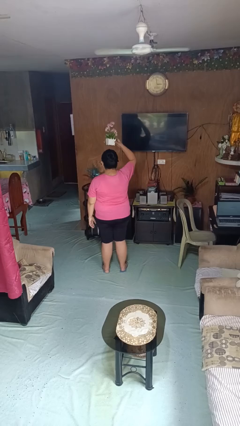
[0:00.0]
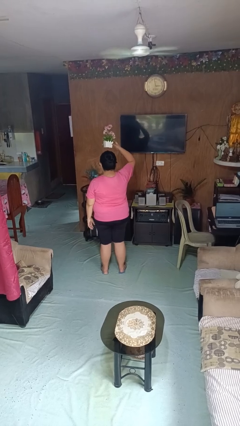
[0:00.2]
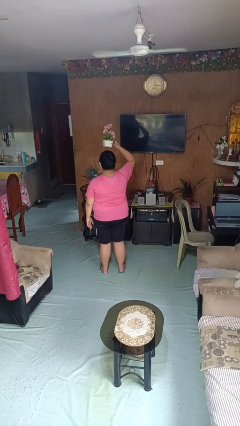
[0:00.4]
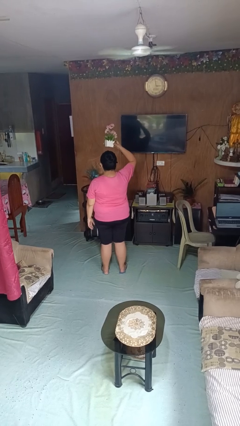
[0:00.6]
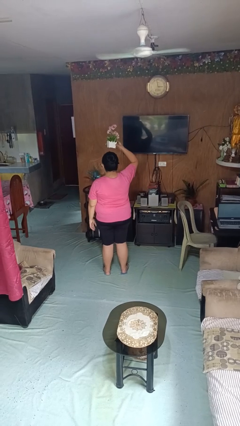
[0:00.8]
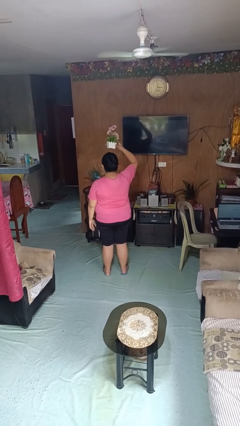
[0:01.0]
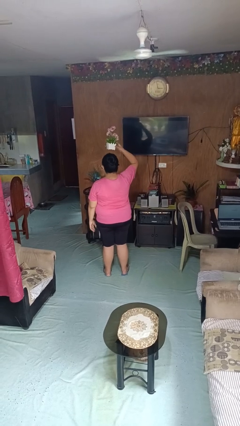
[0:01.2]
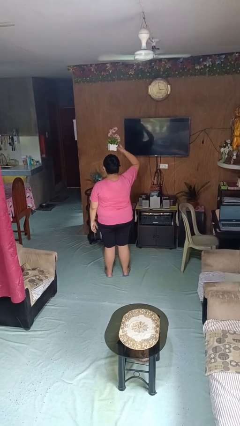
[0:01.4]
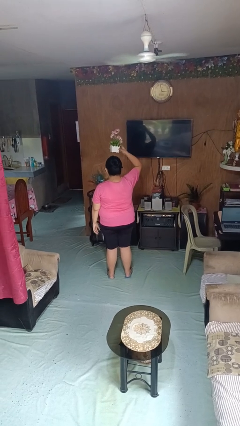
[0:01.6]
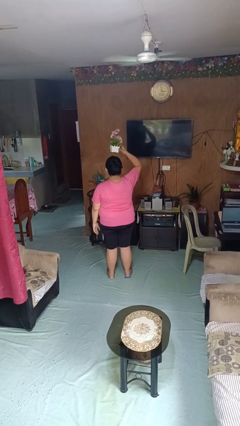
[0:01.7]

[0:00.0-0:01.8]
person holds object above head

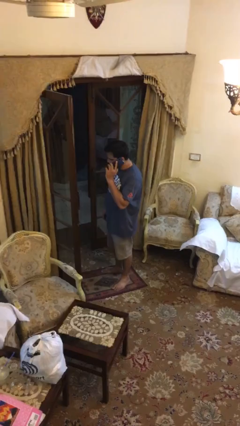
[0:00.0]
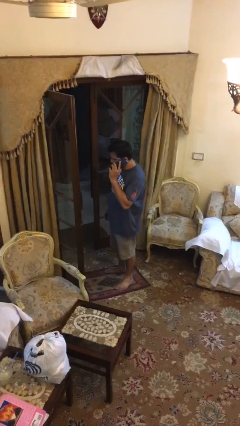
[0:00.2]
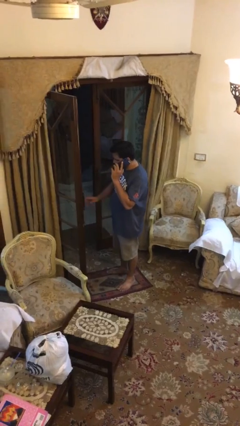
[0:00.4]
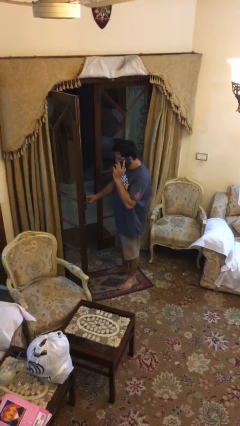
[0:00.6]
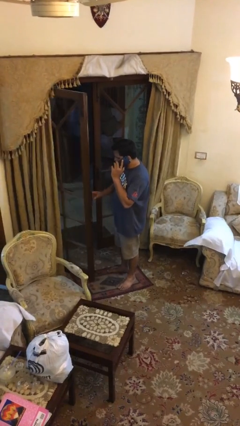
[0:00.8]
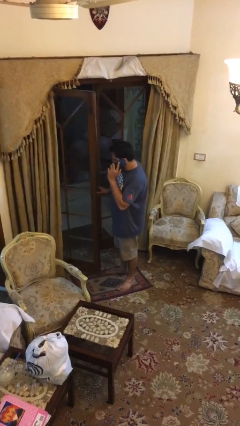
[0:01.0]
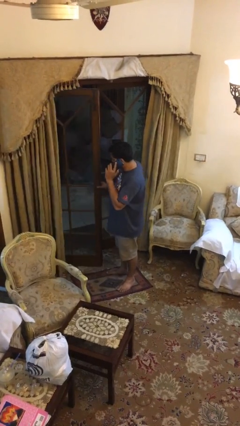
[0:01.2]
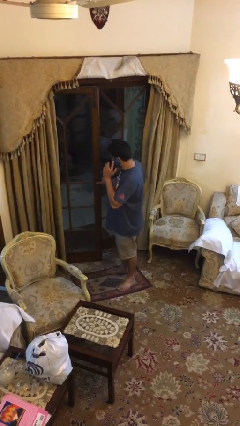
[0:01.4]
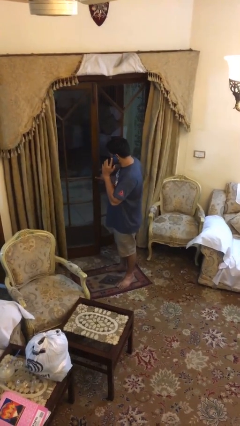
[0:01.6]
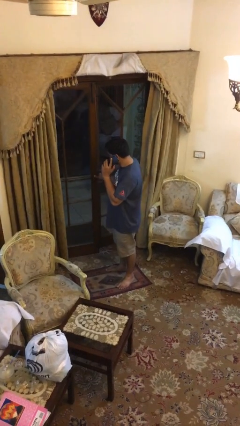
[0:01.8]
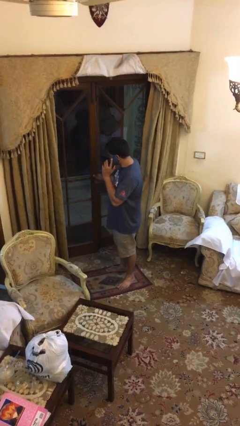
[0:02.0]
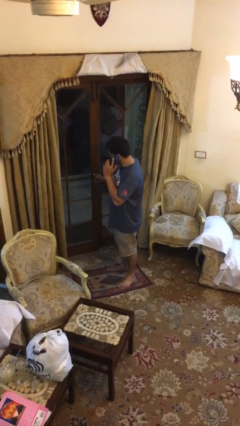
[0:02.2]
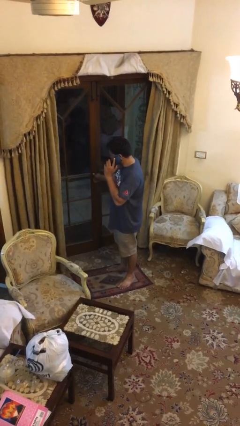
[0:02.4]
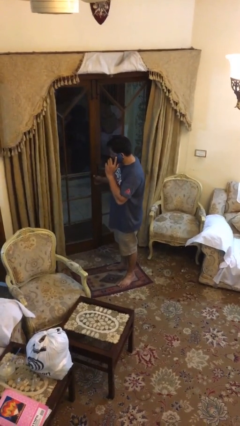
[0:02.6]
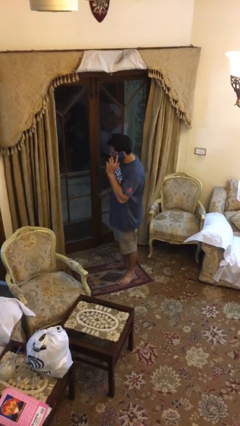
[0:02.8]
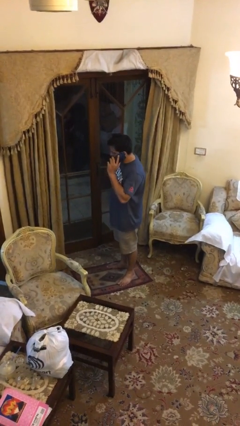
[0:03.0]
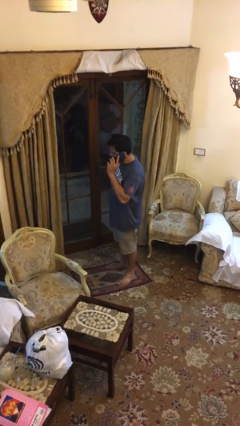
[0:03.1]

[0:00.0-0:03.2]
person closes facility door

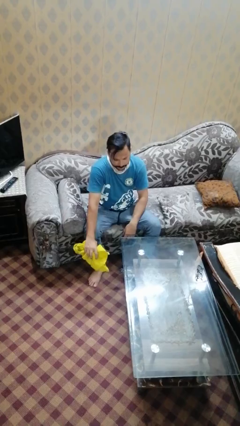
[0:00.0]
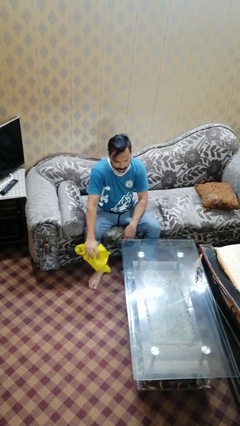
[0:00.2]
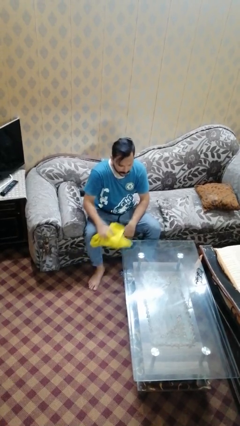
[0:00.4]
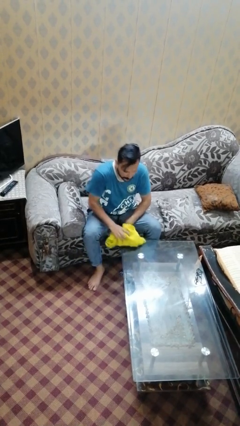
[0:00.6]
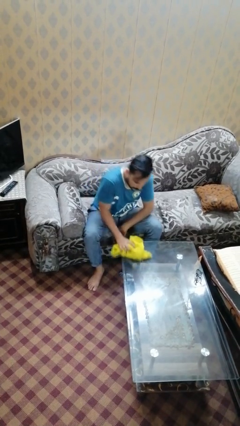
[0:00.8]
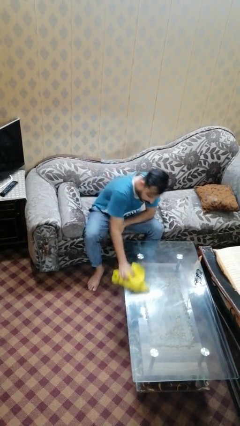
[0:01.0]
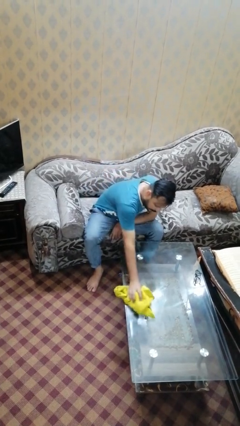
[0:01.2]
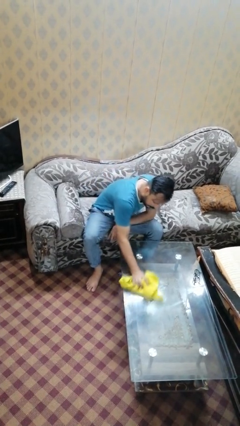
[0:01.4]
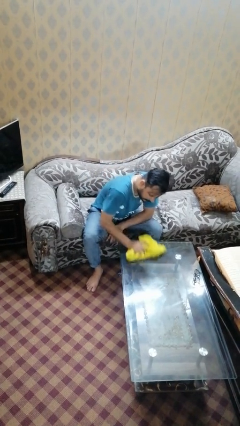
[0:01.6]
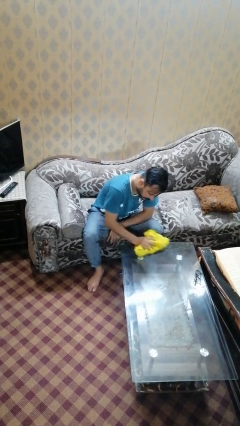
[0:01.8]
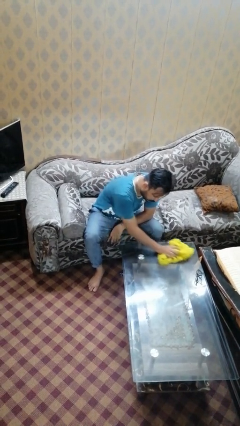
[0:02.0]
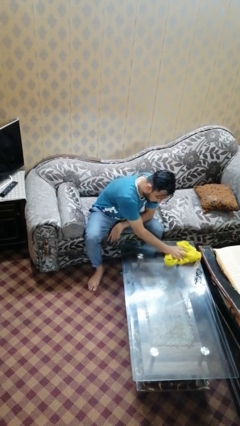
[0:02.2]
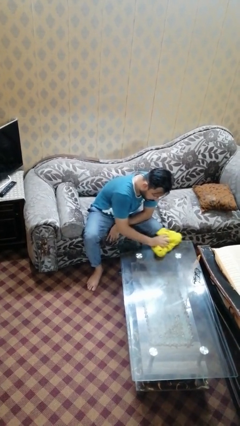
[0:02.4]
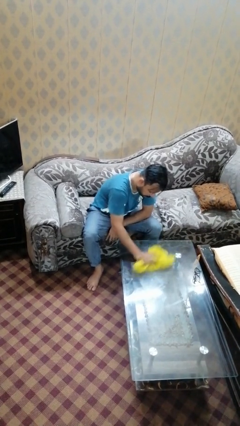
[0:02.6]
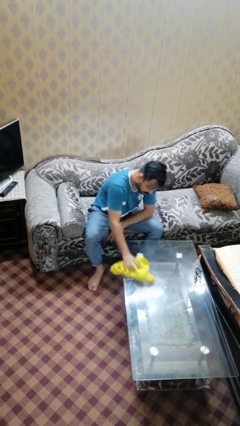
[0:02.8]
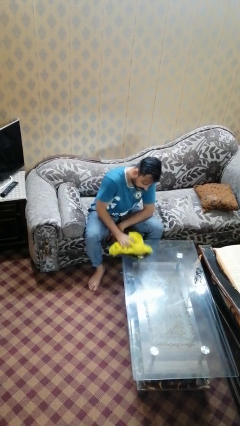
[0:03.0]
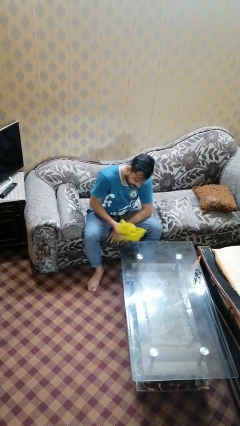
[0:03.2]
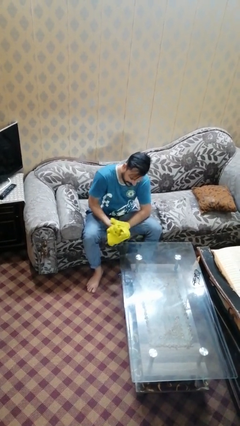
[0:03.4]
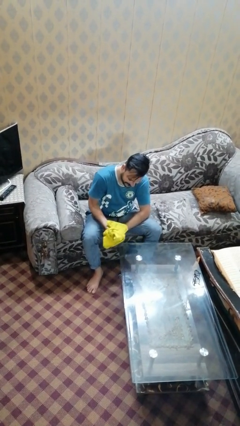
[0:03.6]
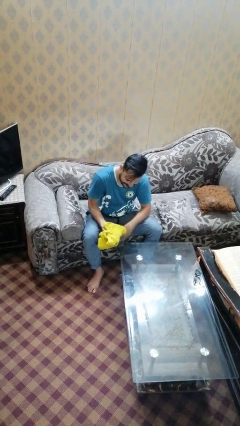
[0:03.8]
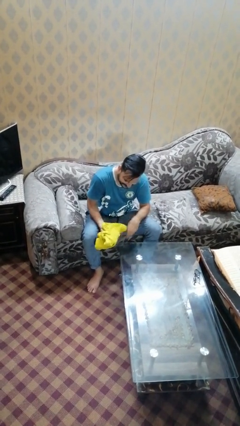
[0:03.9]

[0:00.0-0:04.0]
person cleans table with rag

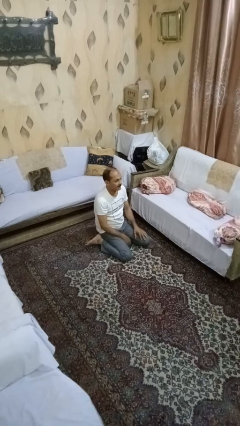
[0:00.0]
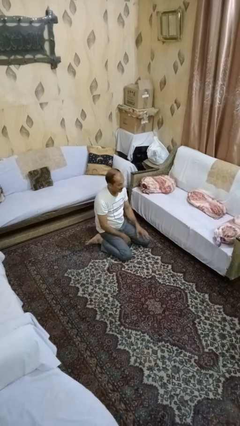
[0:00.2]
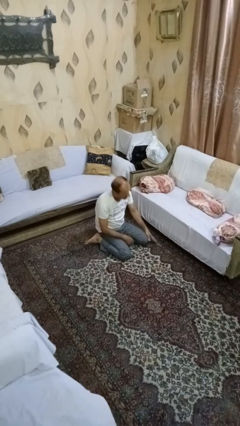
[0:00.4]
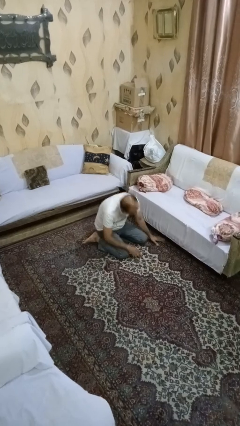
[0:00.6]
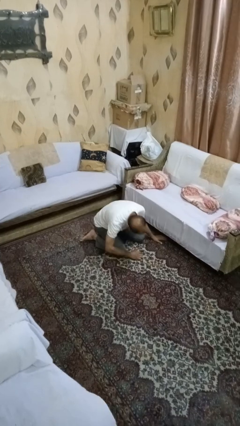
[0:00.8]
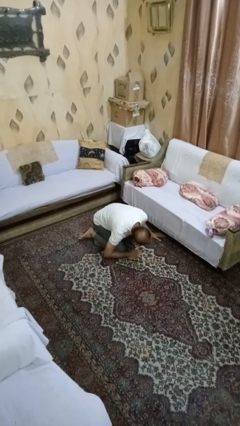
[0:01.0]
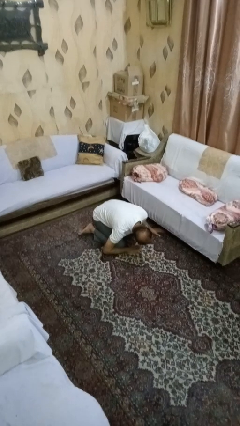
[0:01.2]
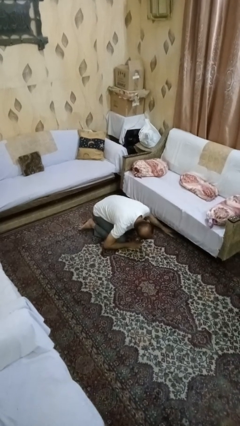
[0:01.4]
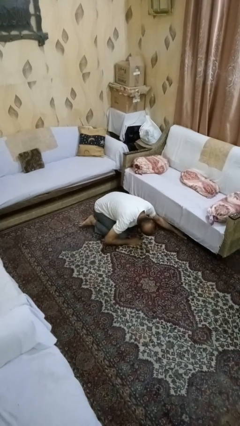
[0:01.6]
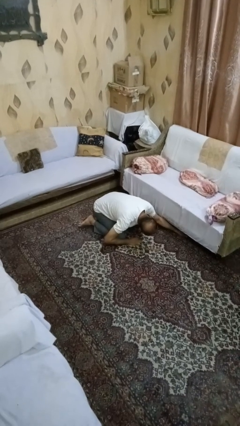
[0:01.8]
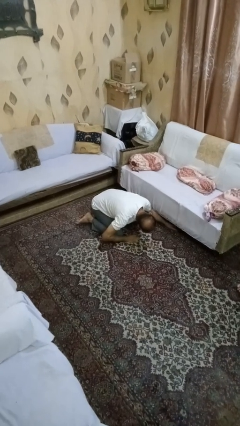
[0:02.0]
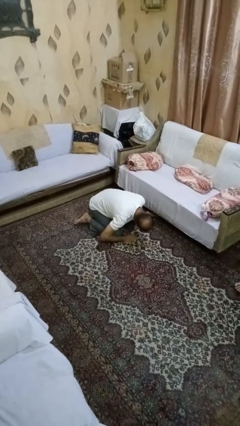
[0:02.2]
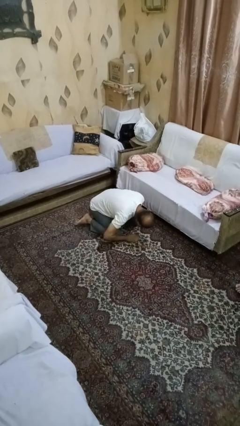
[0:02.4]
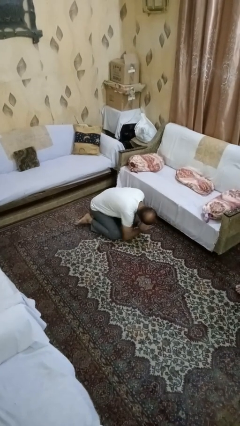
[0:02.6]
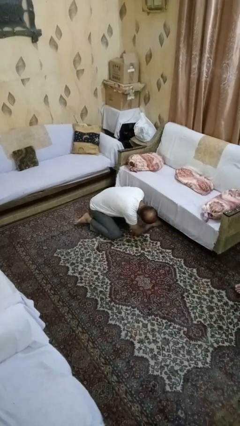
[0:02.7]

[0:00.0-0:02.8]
person searches under couch

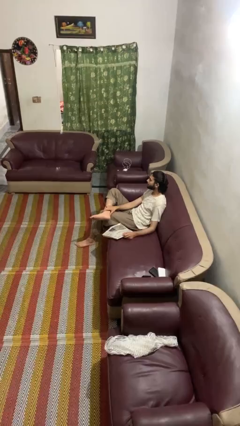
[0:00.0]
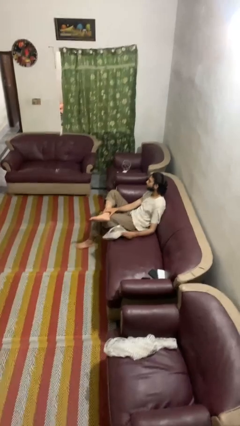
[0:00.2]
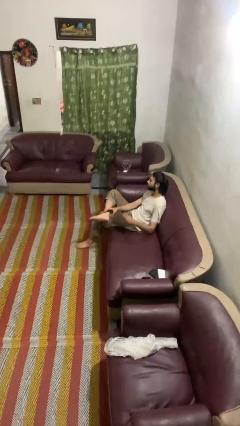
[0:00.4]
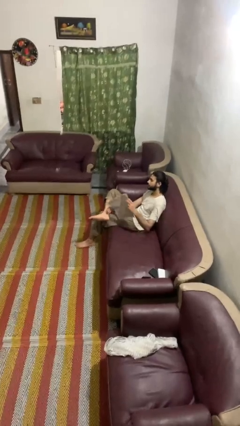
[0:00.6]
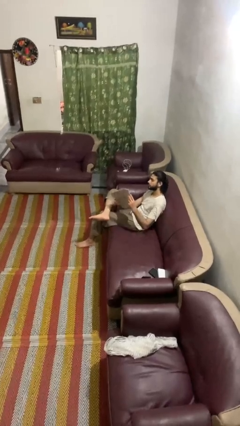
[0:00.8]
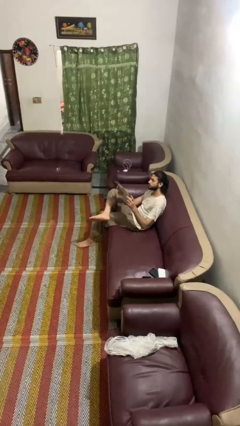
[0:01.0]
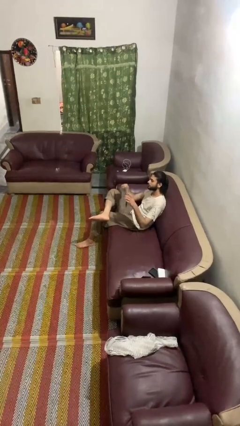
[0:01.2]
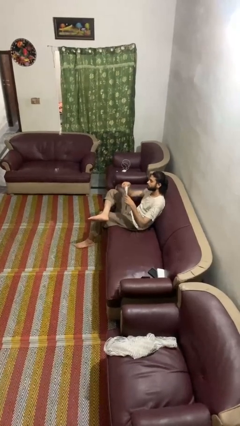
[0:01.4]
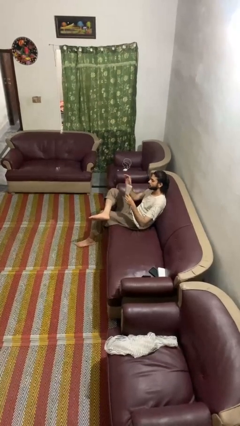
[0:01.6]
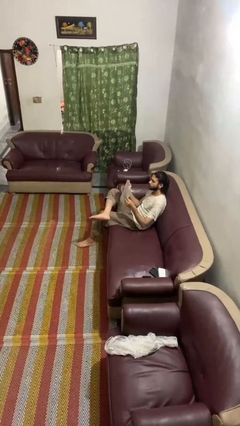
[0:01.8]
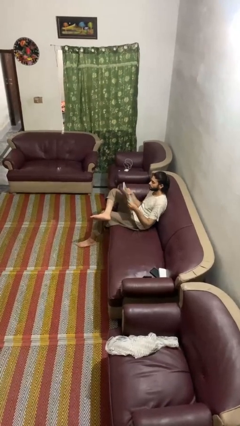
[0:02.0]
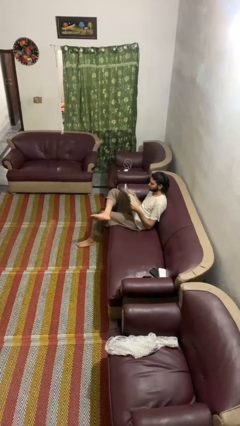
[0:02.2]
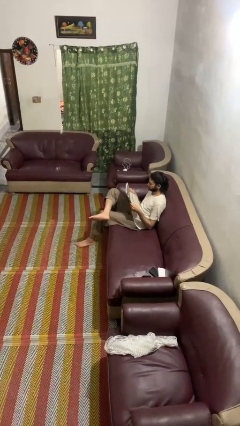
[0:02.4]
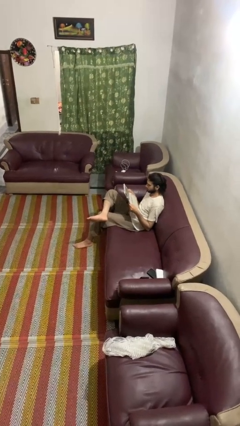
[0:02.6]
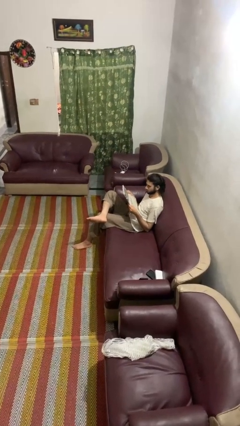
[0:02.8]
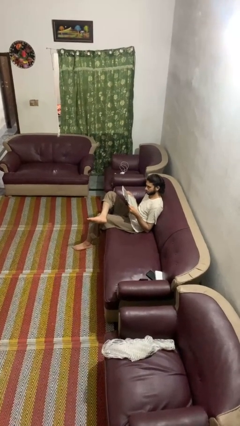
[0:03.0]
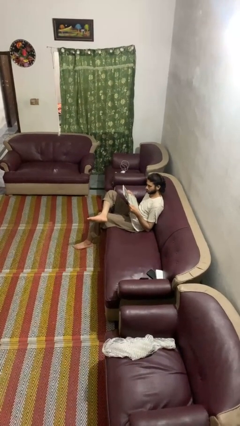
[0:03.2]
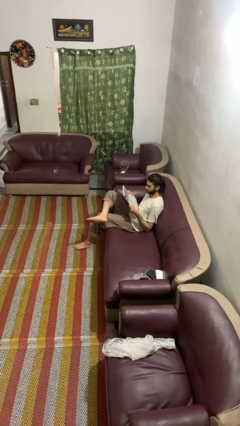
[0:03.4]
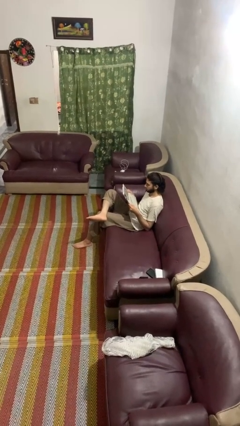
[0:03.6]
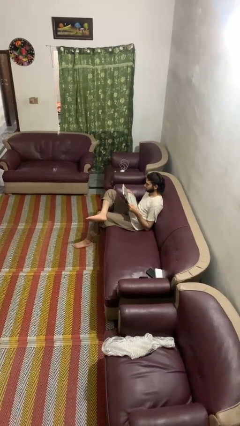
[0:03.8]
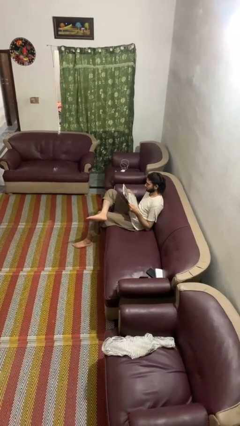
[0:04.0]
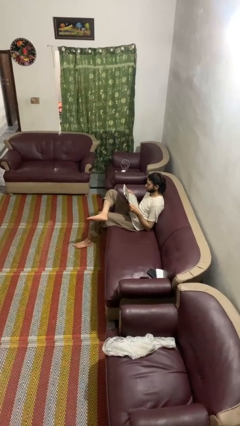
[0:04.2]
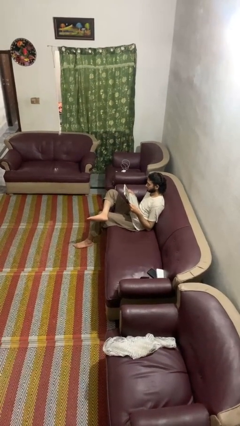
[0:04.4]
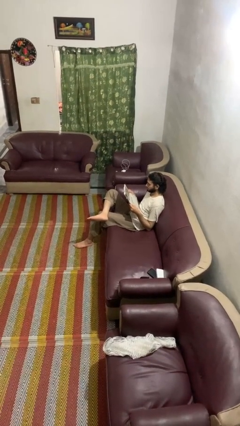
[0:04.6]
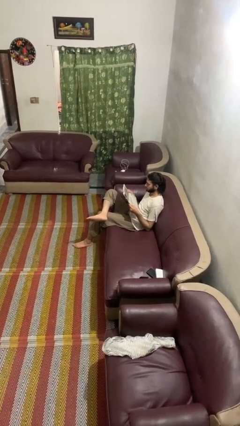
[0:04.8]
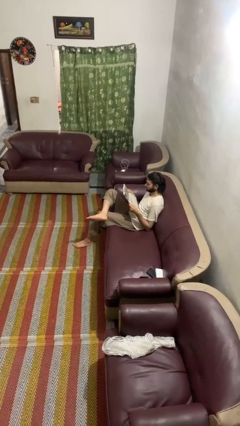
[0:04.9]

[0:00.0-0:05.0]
person reads newspaper

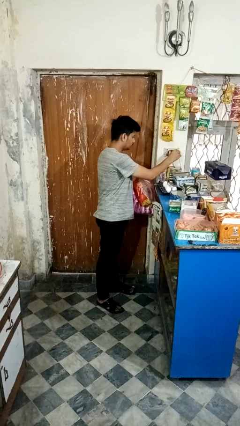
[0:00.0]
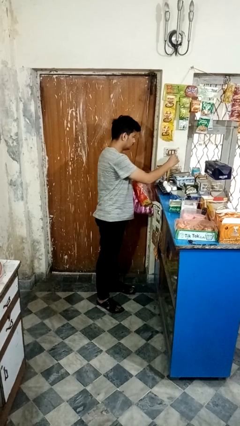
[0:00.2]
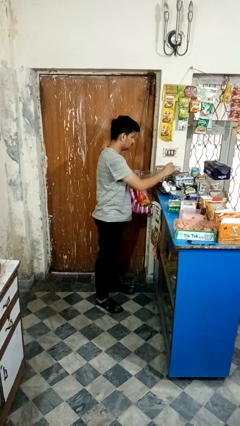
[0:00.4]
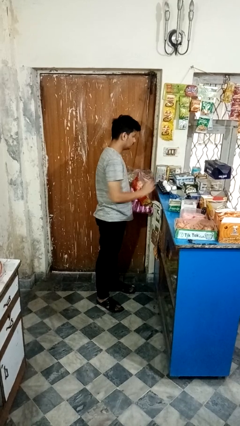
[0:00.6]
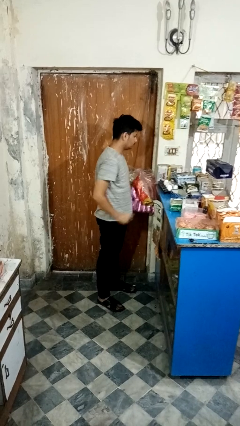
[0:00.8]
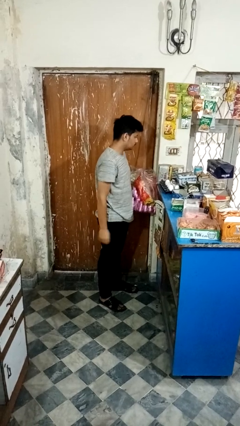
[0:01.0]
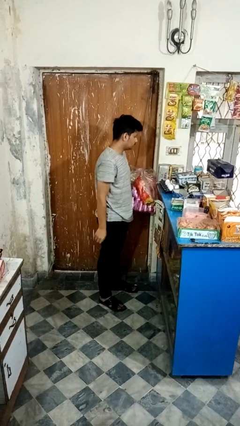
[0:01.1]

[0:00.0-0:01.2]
person unplugs from electrical socket
